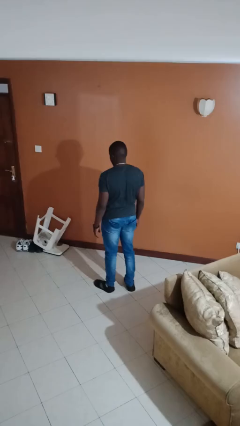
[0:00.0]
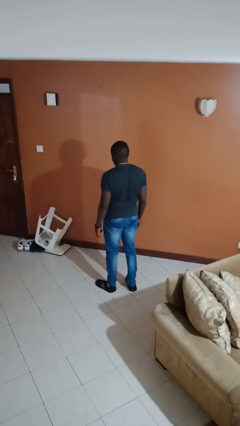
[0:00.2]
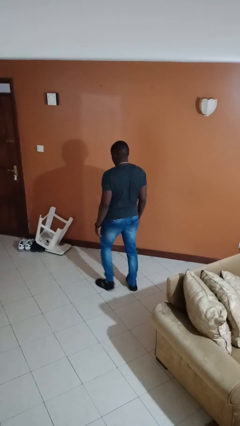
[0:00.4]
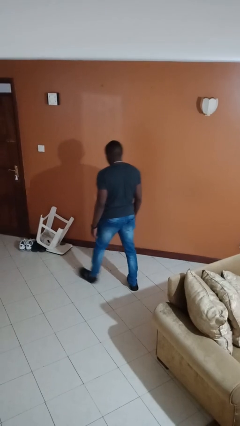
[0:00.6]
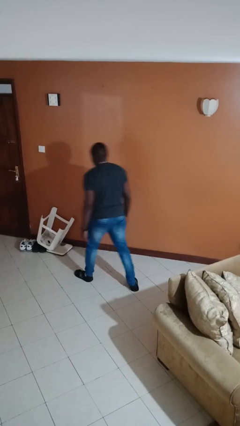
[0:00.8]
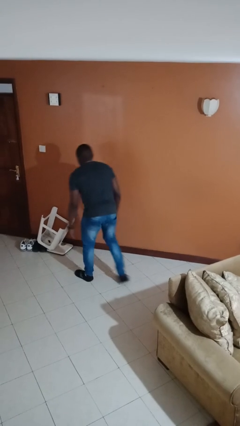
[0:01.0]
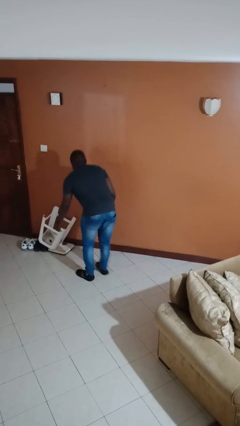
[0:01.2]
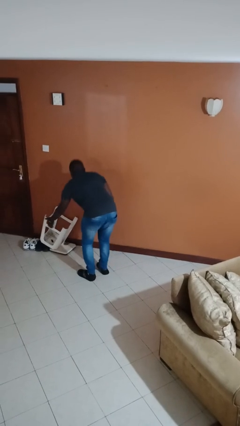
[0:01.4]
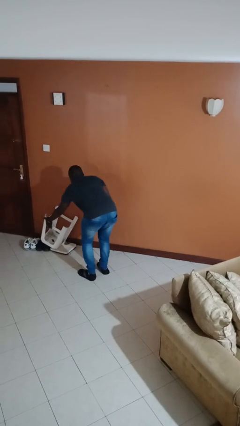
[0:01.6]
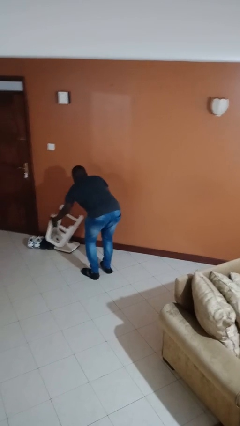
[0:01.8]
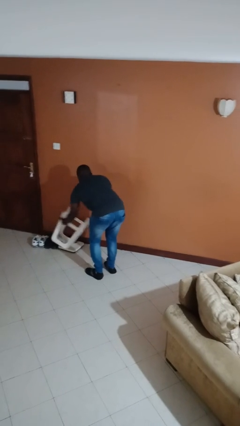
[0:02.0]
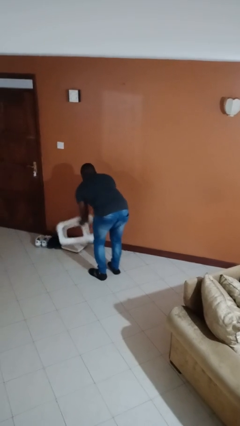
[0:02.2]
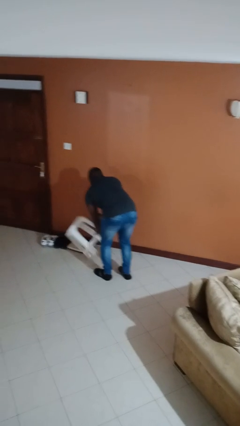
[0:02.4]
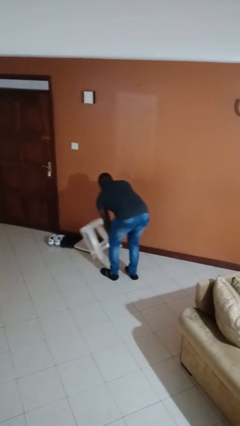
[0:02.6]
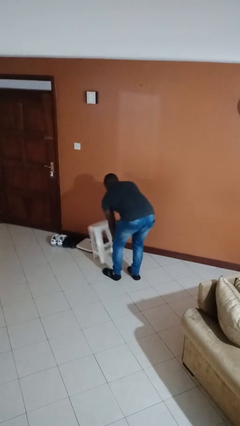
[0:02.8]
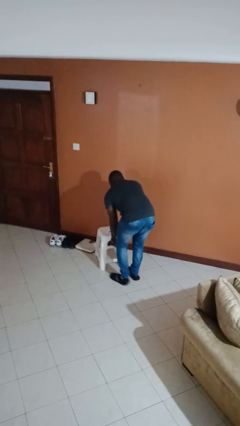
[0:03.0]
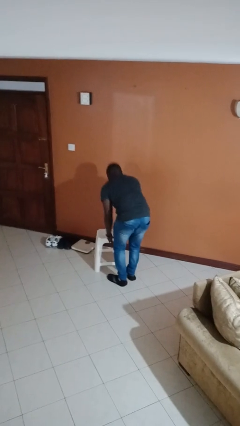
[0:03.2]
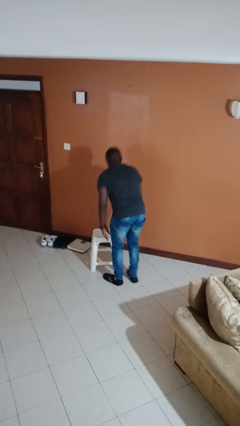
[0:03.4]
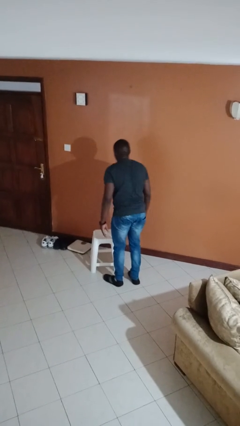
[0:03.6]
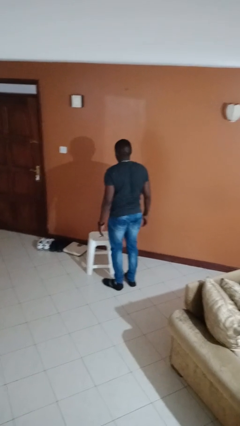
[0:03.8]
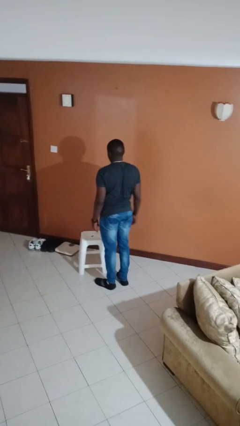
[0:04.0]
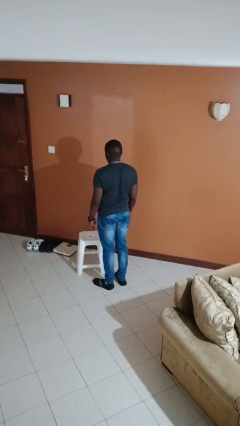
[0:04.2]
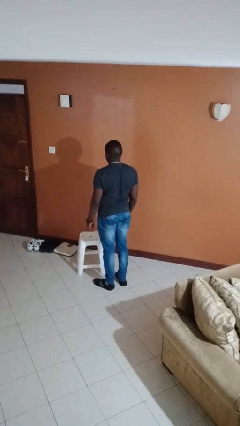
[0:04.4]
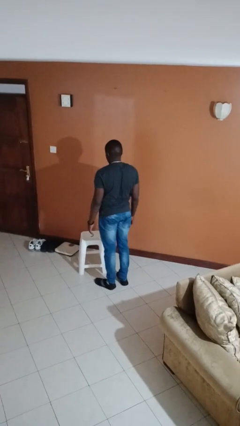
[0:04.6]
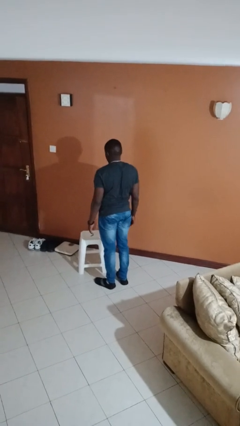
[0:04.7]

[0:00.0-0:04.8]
person sets upright furniture

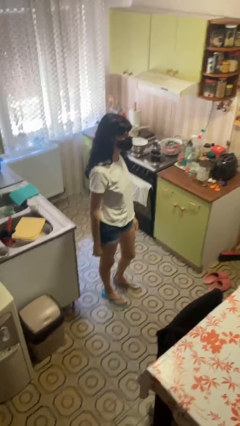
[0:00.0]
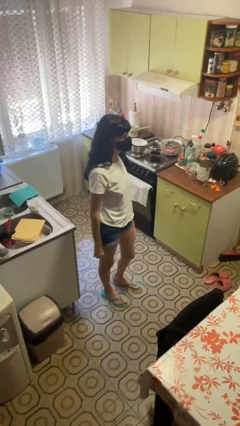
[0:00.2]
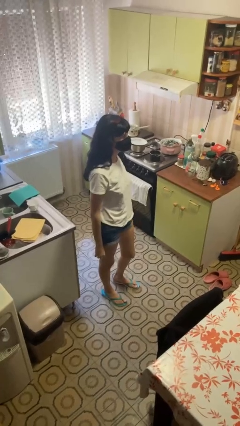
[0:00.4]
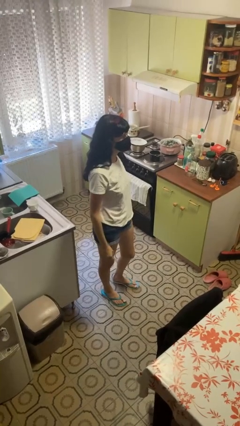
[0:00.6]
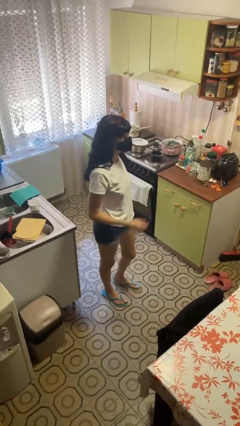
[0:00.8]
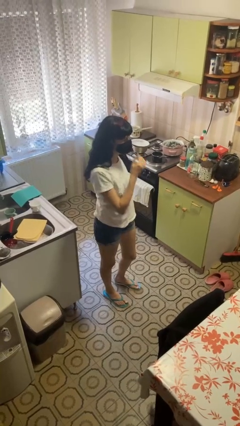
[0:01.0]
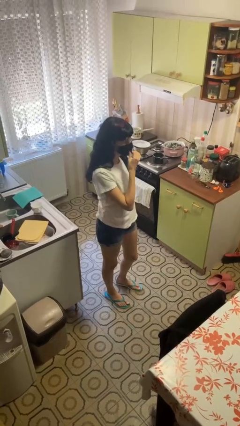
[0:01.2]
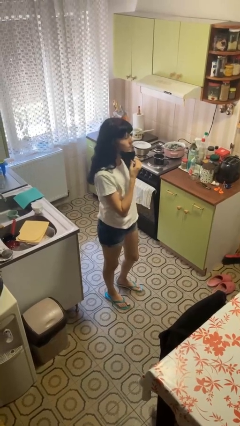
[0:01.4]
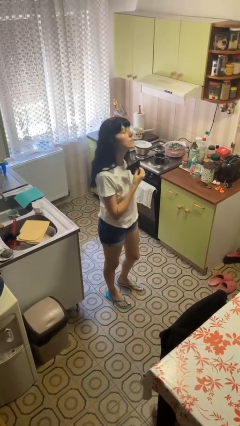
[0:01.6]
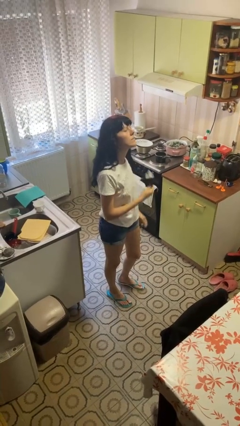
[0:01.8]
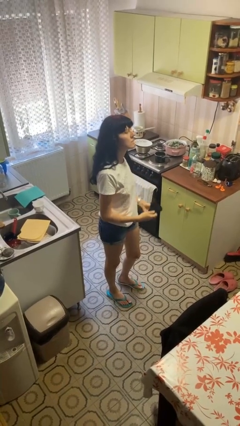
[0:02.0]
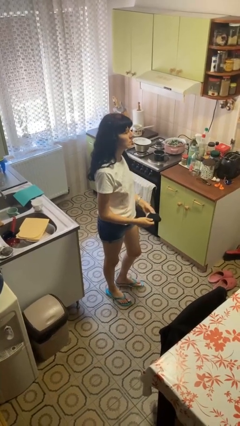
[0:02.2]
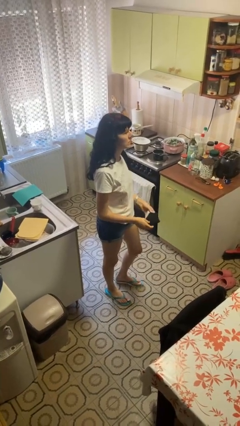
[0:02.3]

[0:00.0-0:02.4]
person takes off facemask

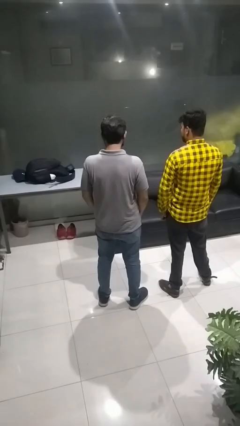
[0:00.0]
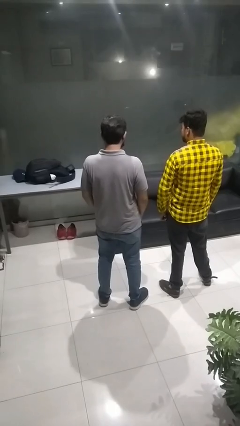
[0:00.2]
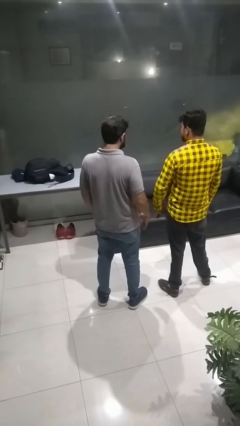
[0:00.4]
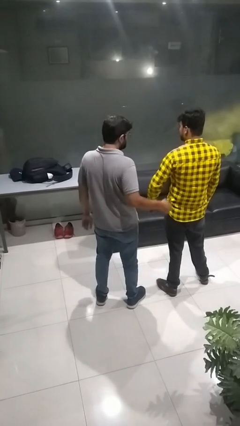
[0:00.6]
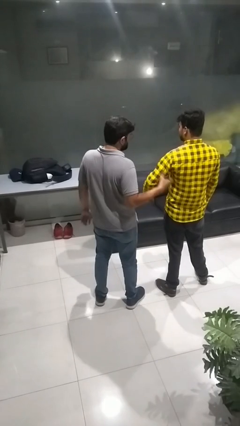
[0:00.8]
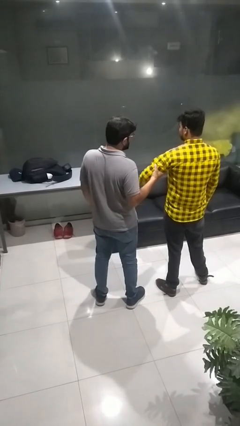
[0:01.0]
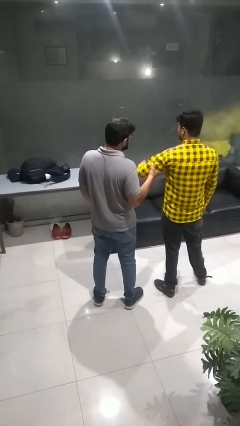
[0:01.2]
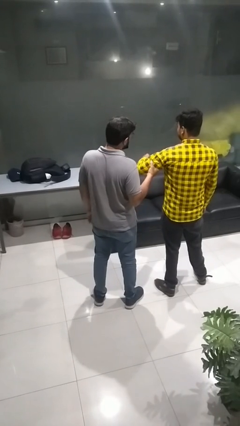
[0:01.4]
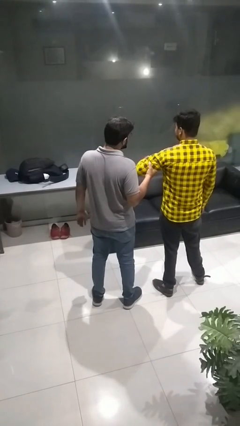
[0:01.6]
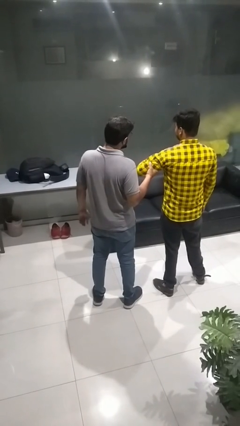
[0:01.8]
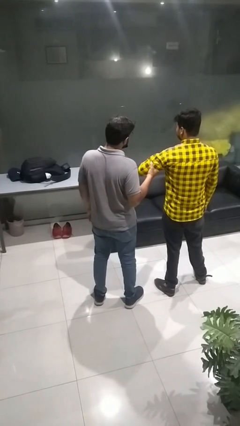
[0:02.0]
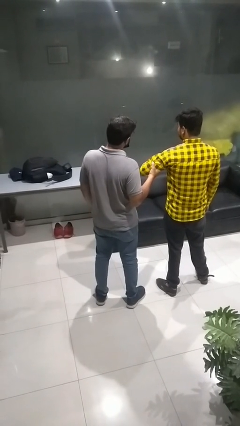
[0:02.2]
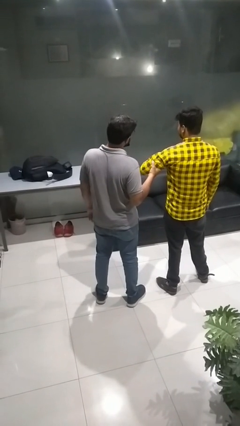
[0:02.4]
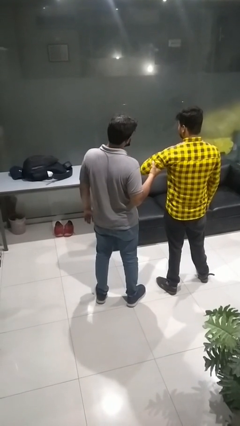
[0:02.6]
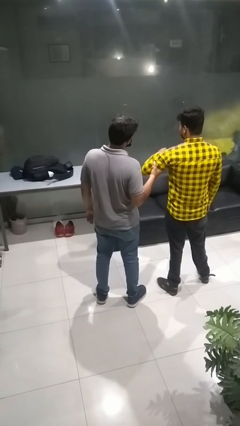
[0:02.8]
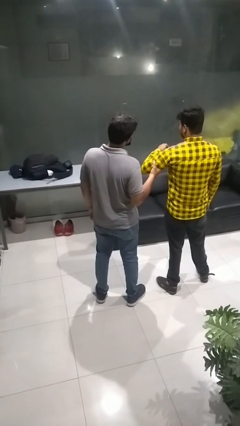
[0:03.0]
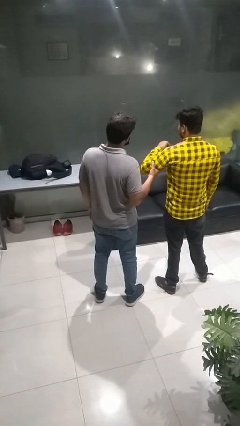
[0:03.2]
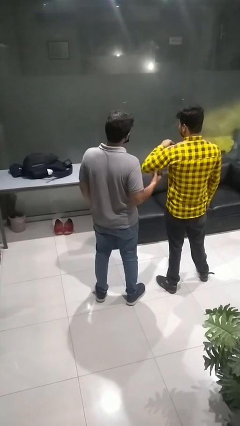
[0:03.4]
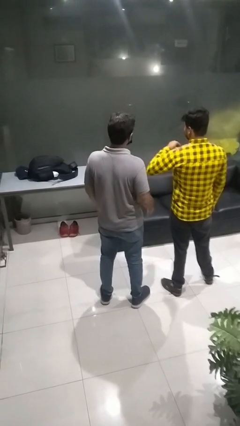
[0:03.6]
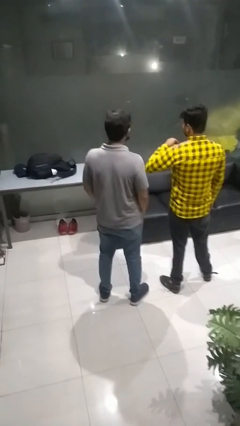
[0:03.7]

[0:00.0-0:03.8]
person grabs person by bicep

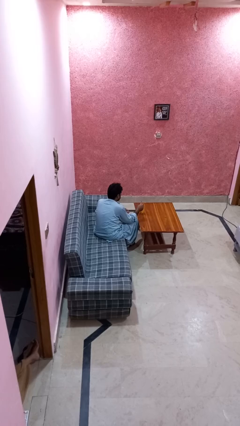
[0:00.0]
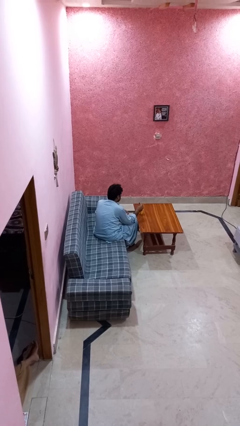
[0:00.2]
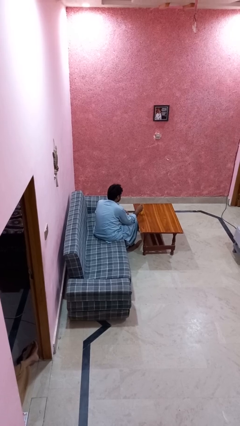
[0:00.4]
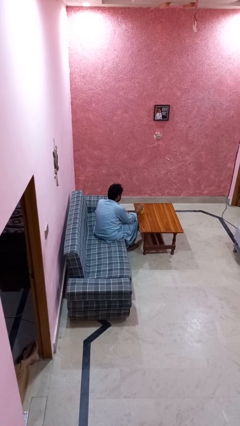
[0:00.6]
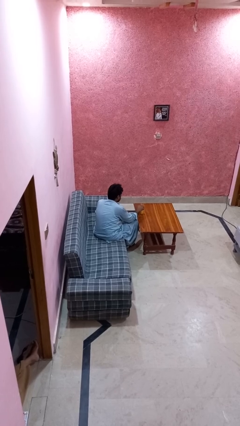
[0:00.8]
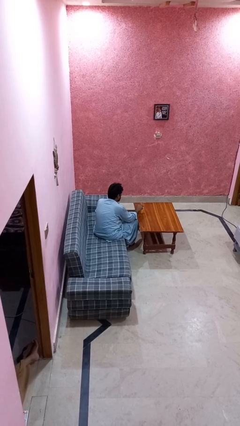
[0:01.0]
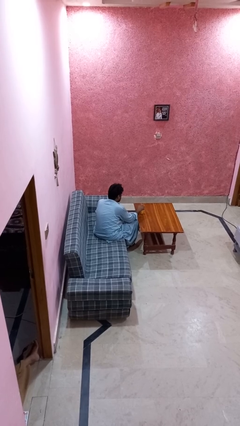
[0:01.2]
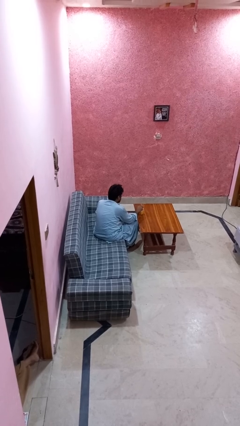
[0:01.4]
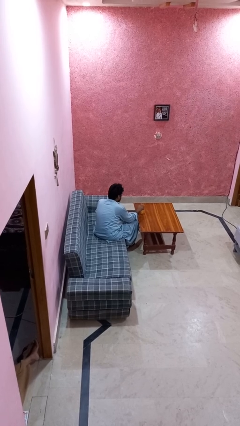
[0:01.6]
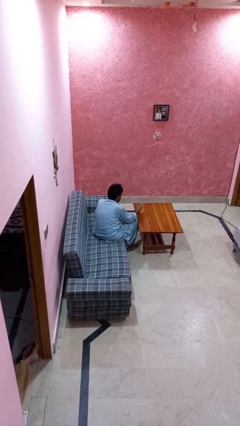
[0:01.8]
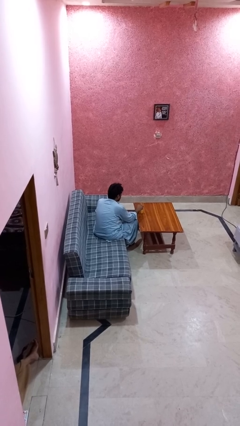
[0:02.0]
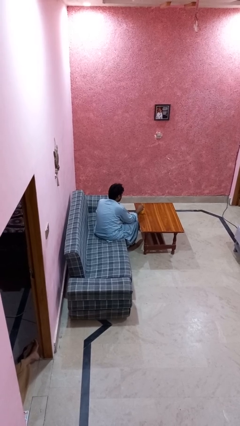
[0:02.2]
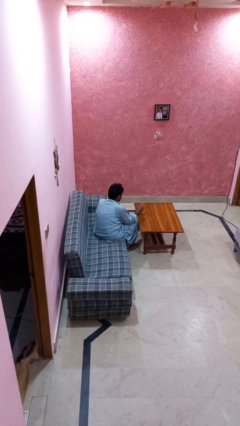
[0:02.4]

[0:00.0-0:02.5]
person stirs mug

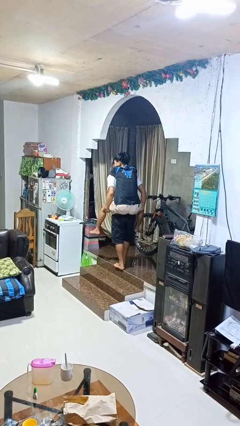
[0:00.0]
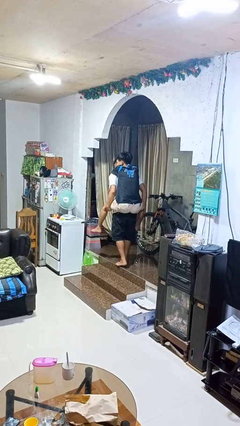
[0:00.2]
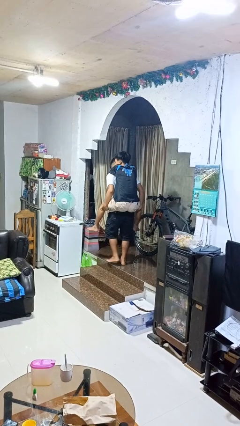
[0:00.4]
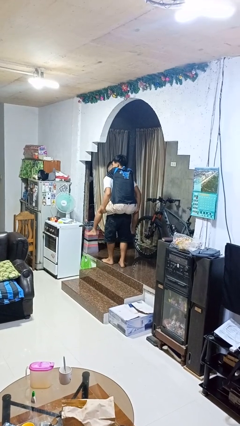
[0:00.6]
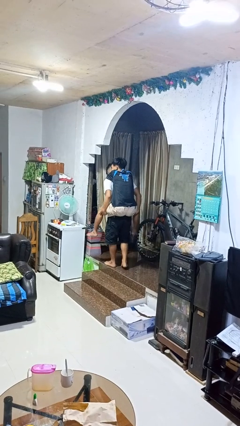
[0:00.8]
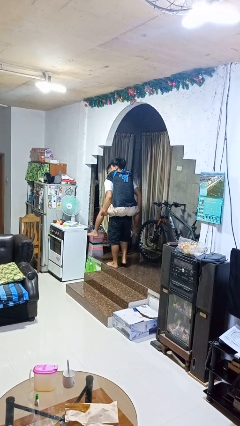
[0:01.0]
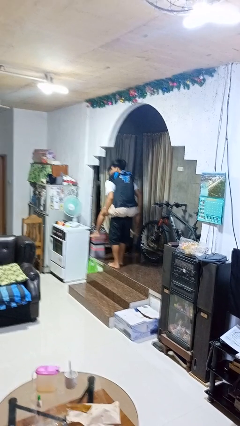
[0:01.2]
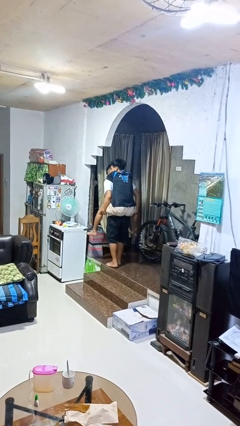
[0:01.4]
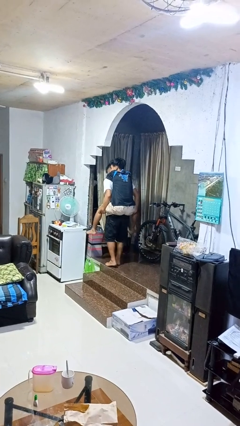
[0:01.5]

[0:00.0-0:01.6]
person carries person on back

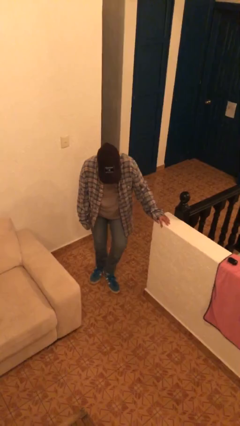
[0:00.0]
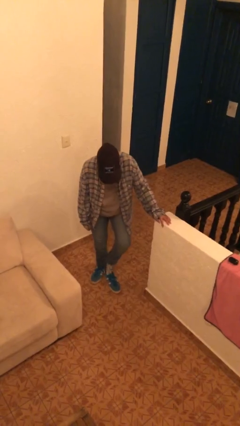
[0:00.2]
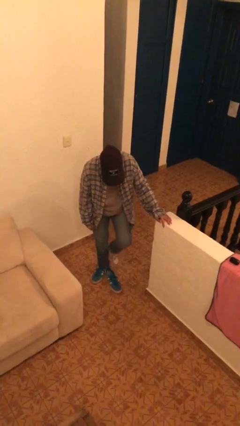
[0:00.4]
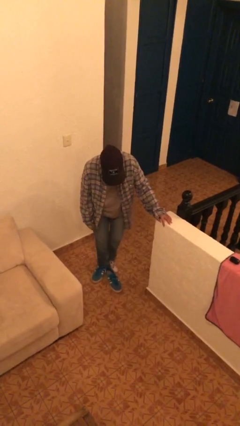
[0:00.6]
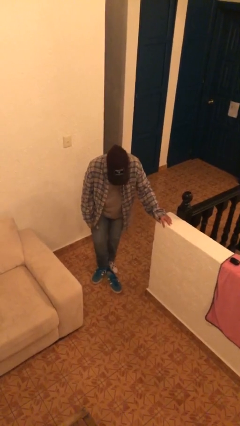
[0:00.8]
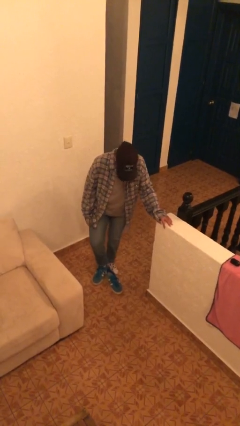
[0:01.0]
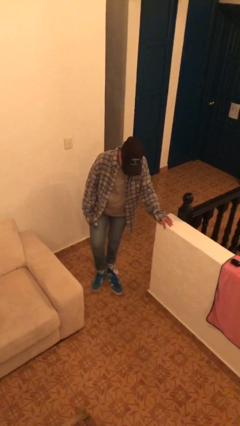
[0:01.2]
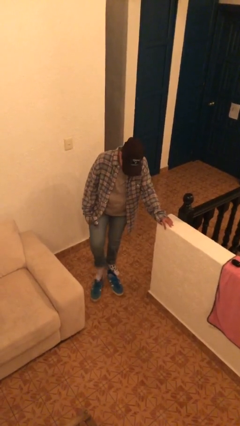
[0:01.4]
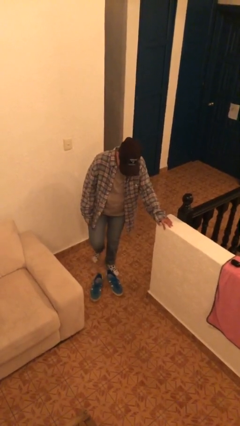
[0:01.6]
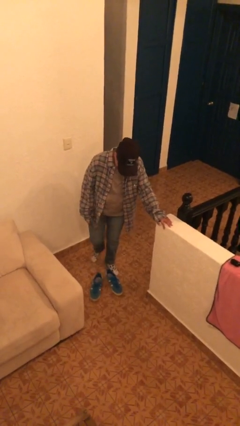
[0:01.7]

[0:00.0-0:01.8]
person takes off shoes

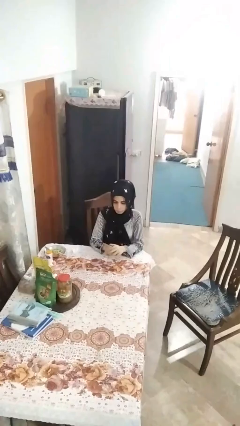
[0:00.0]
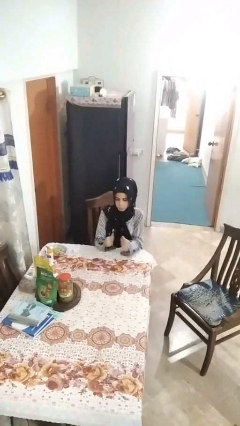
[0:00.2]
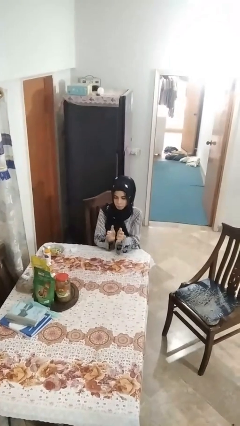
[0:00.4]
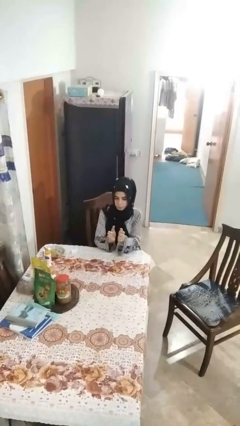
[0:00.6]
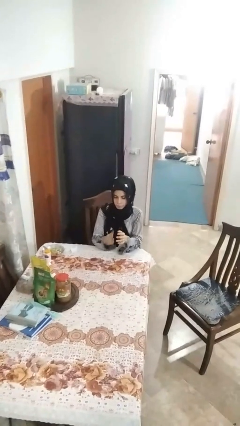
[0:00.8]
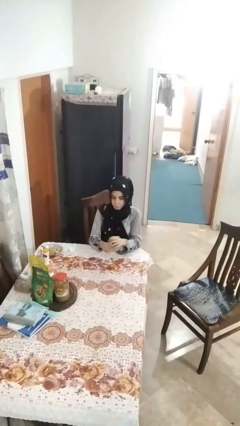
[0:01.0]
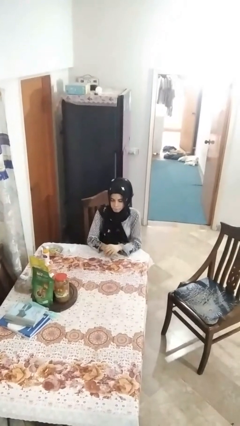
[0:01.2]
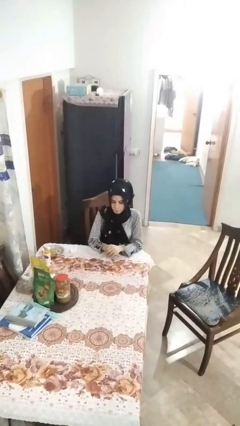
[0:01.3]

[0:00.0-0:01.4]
person claps hands
